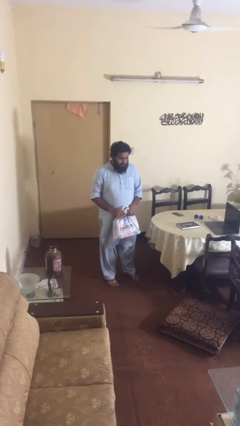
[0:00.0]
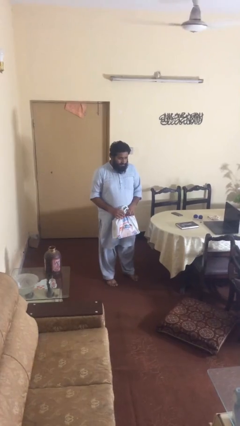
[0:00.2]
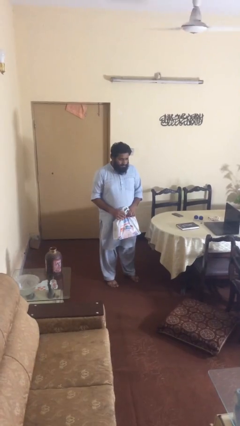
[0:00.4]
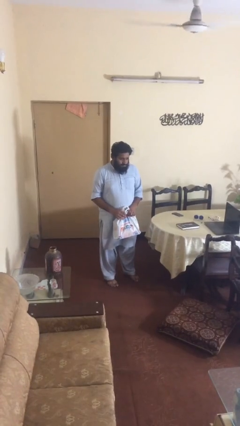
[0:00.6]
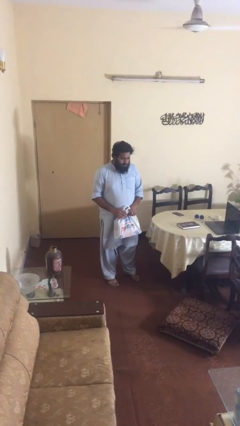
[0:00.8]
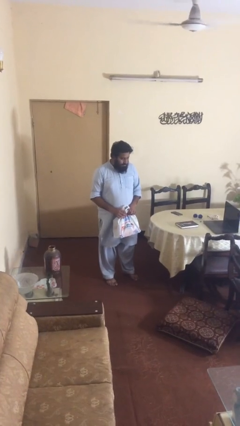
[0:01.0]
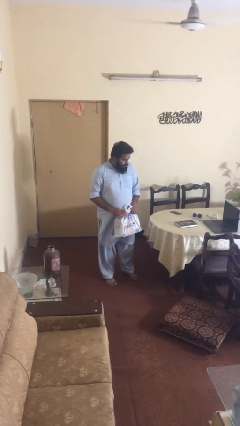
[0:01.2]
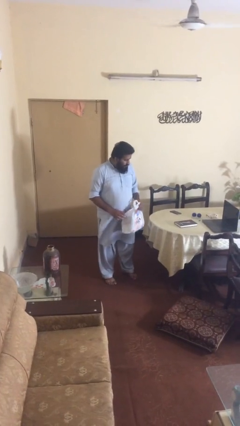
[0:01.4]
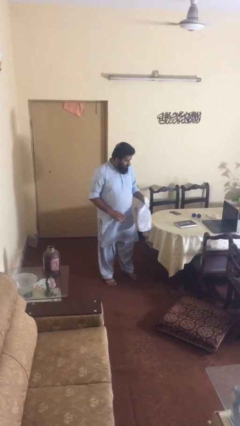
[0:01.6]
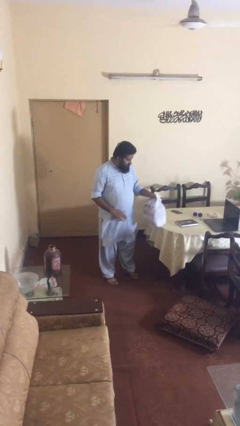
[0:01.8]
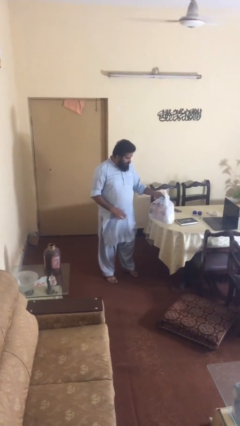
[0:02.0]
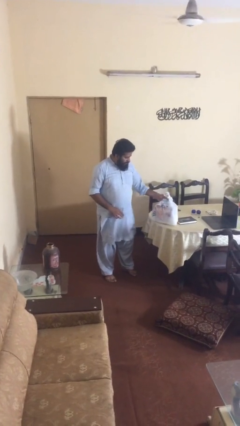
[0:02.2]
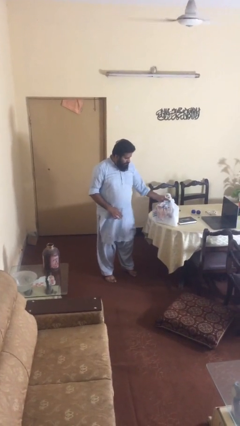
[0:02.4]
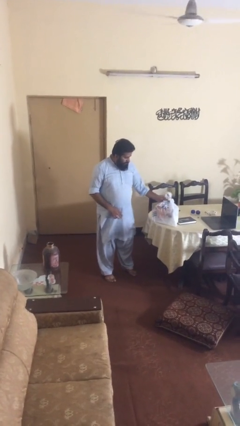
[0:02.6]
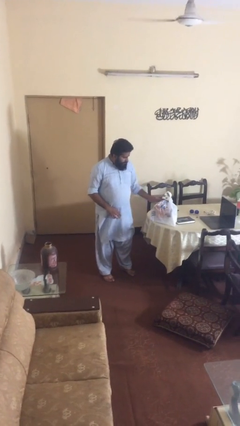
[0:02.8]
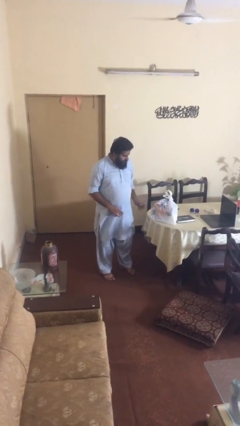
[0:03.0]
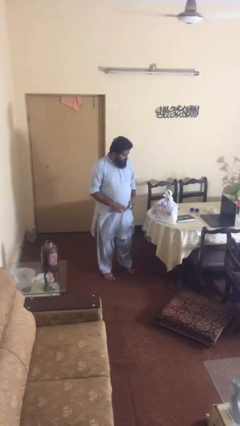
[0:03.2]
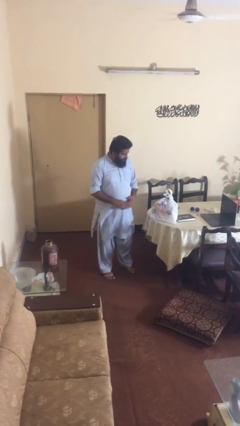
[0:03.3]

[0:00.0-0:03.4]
person puts down object on table

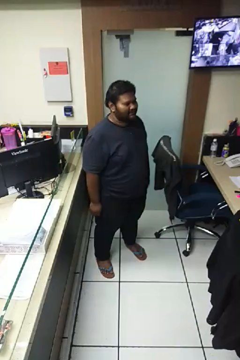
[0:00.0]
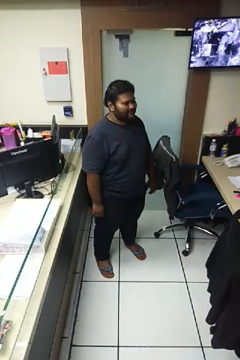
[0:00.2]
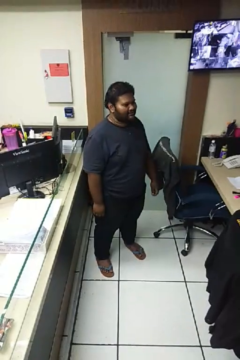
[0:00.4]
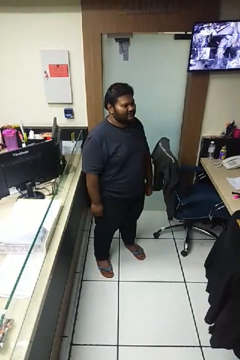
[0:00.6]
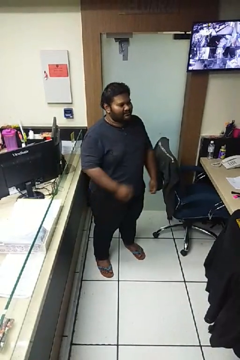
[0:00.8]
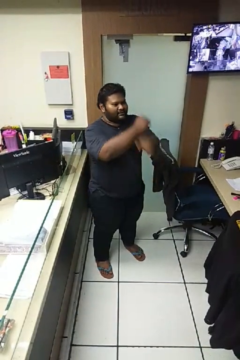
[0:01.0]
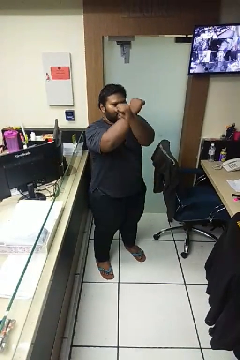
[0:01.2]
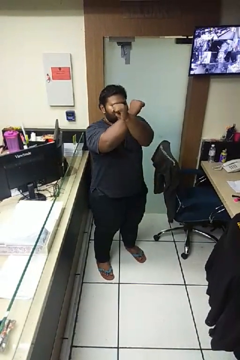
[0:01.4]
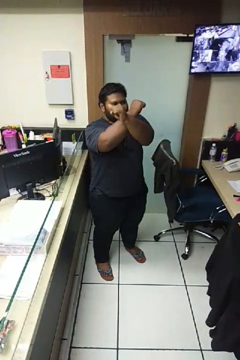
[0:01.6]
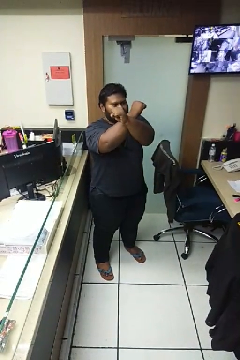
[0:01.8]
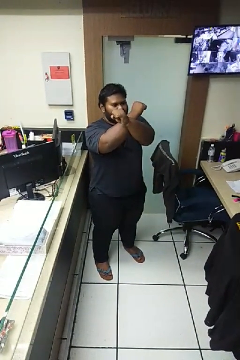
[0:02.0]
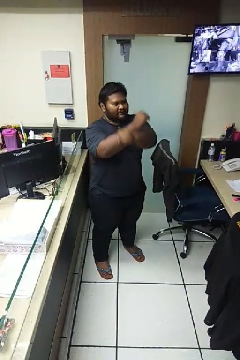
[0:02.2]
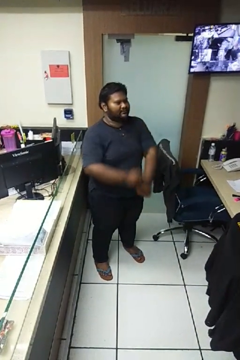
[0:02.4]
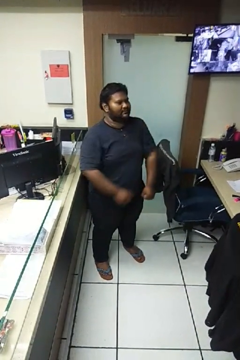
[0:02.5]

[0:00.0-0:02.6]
person gestures arms x

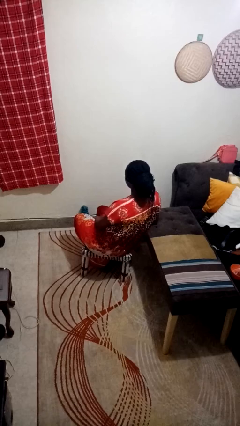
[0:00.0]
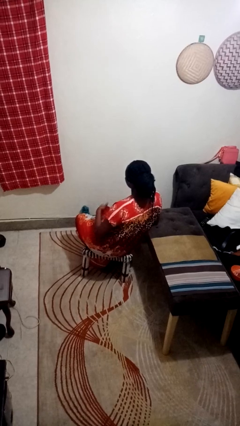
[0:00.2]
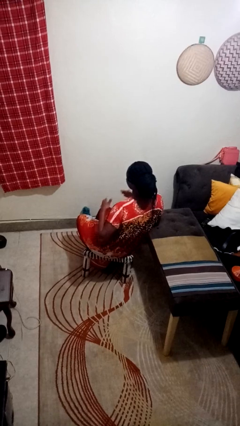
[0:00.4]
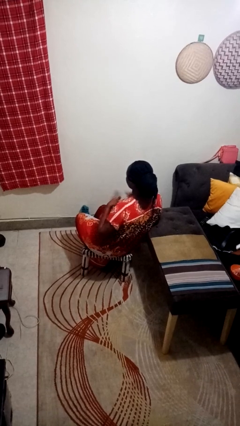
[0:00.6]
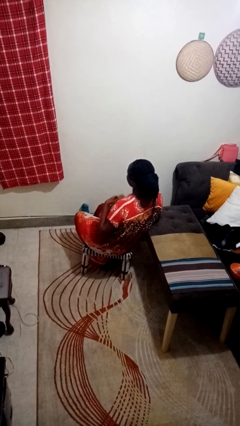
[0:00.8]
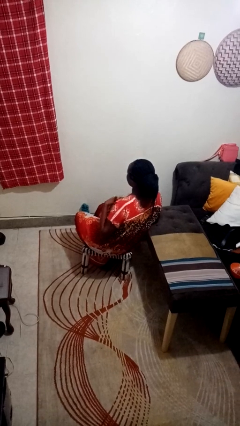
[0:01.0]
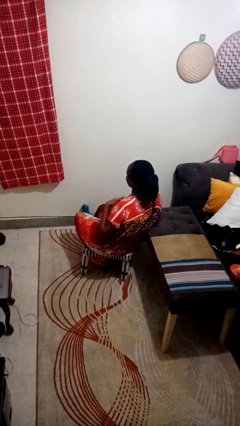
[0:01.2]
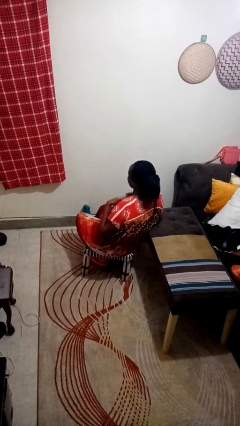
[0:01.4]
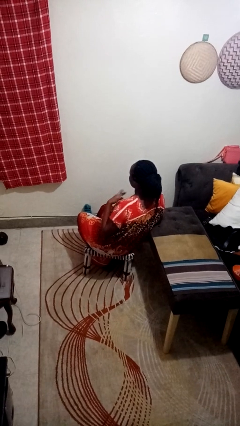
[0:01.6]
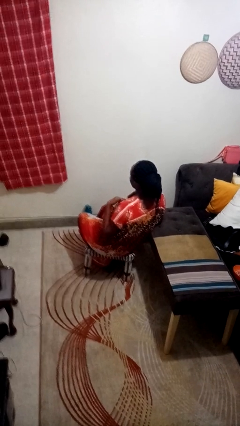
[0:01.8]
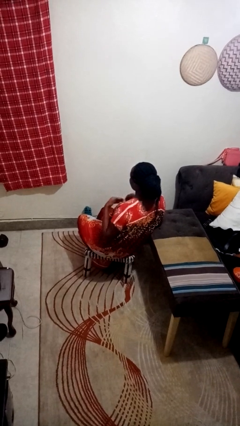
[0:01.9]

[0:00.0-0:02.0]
person drums on chest

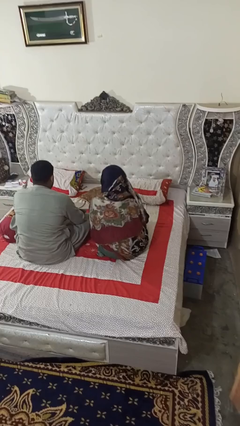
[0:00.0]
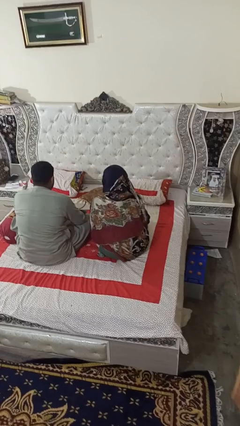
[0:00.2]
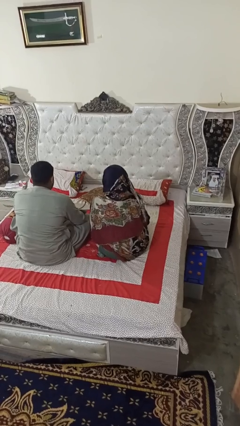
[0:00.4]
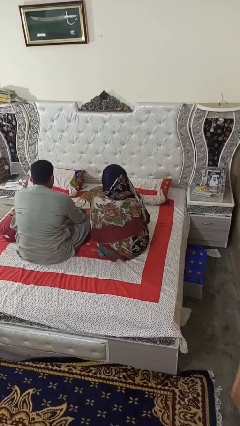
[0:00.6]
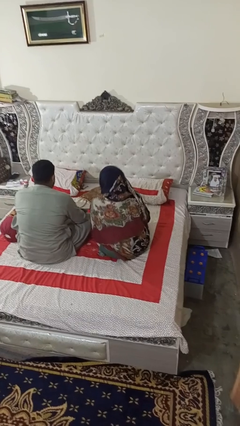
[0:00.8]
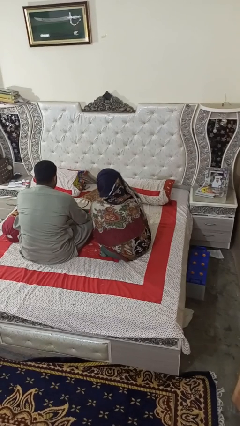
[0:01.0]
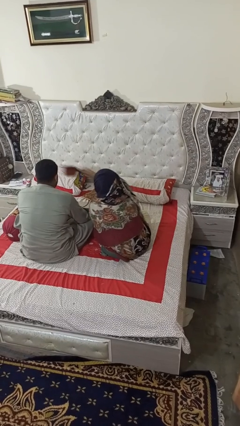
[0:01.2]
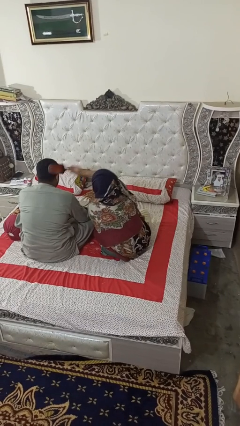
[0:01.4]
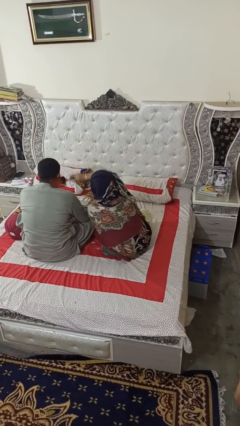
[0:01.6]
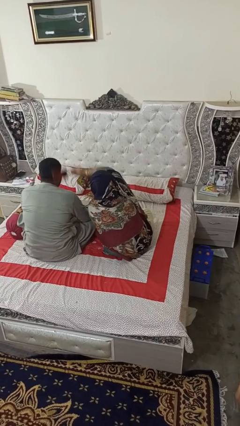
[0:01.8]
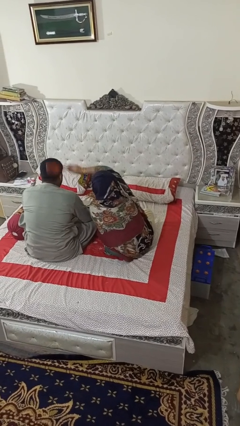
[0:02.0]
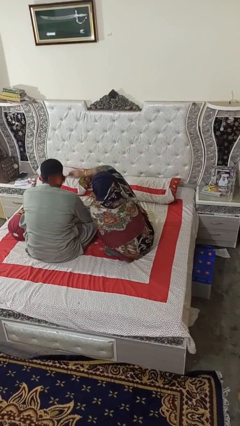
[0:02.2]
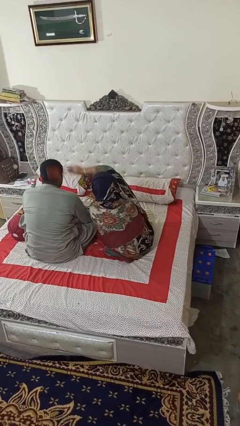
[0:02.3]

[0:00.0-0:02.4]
person brushes hair of person

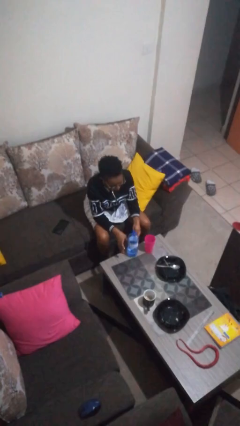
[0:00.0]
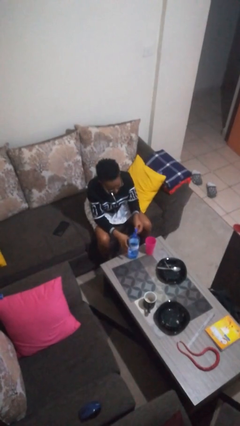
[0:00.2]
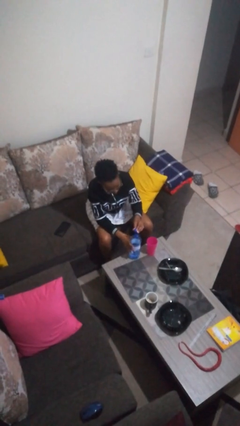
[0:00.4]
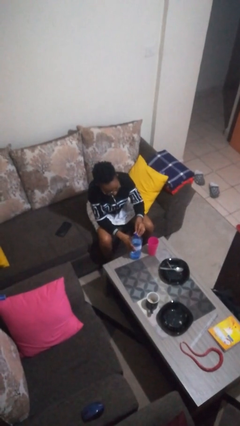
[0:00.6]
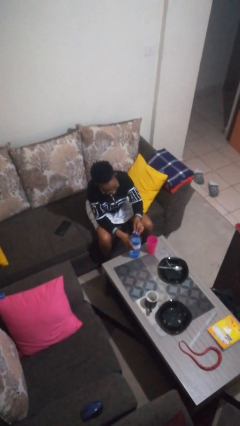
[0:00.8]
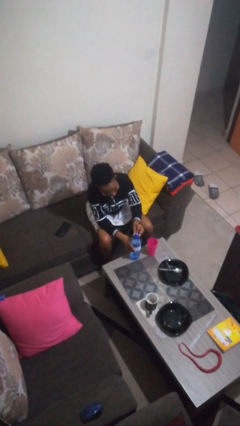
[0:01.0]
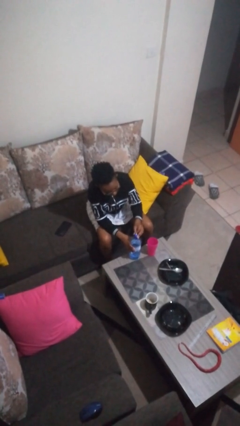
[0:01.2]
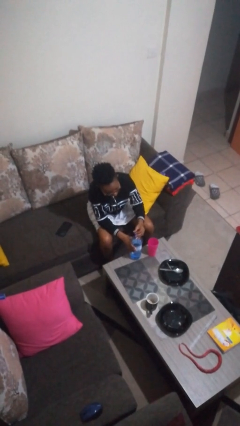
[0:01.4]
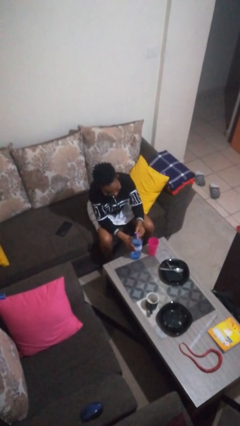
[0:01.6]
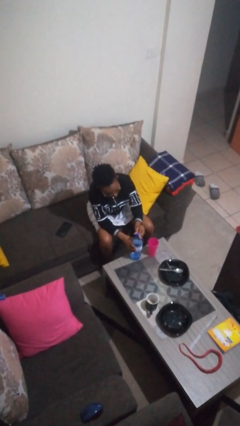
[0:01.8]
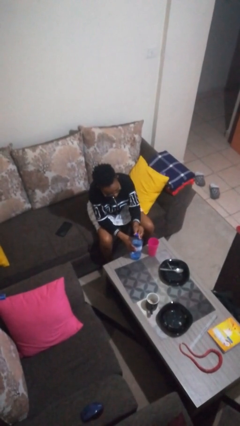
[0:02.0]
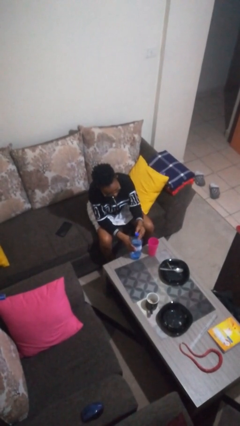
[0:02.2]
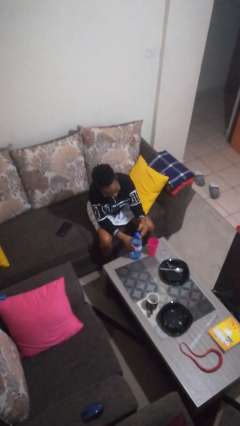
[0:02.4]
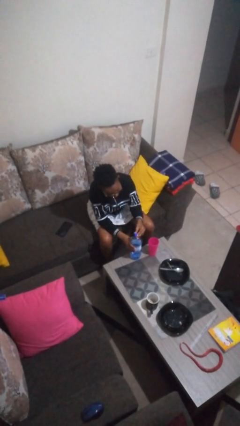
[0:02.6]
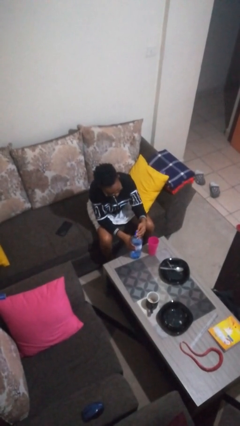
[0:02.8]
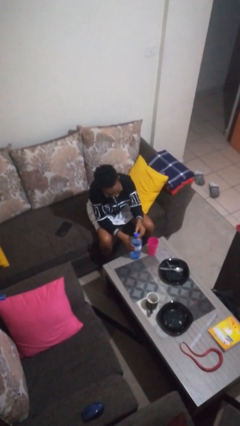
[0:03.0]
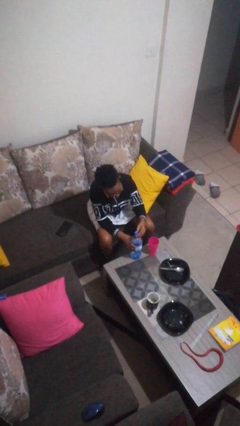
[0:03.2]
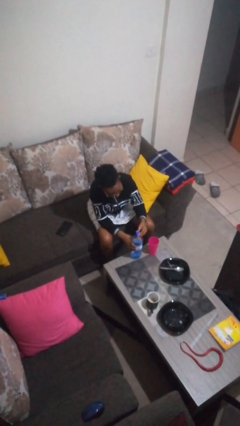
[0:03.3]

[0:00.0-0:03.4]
person screws lid to bottle

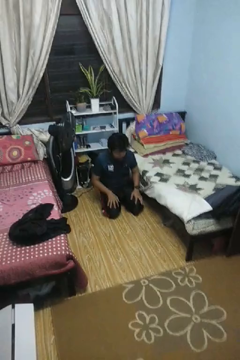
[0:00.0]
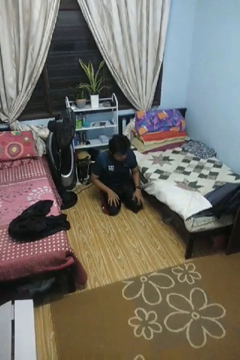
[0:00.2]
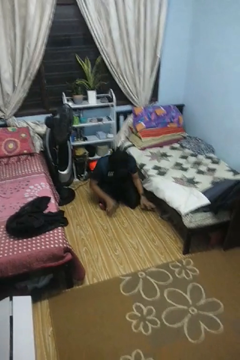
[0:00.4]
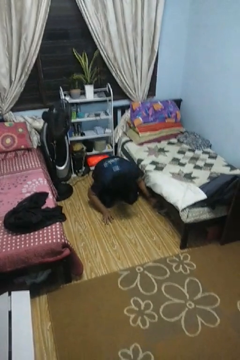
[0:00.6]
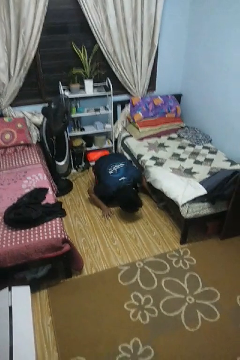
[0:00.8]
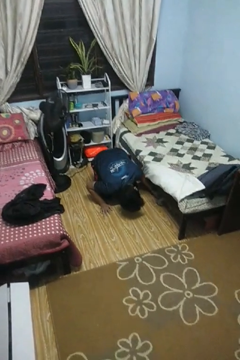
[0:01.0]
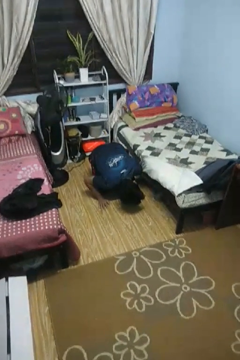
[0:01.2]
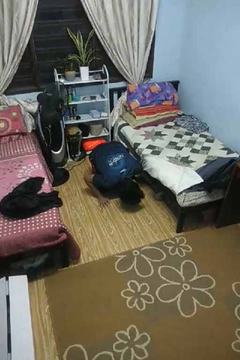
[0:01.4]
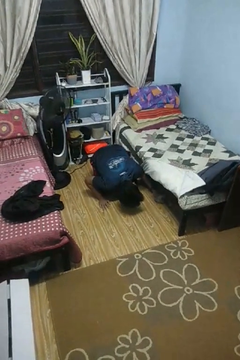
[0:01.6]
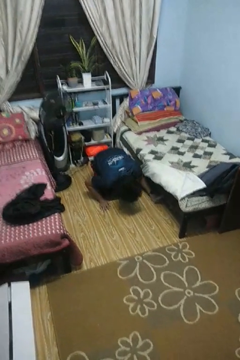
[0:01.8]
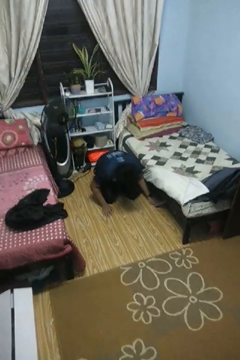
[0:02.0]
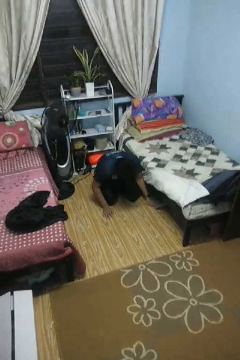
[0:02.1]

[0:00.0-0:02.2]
person searches under bed

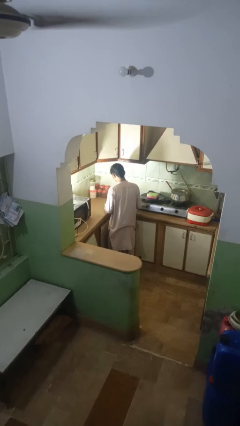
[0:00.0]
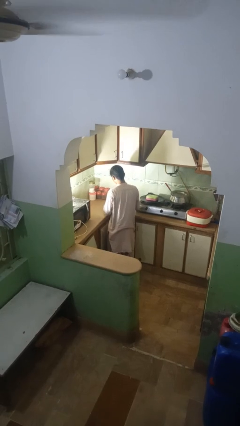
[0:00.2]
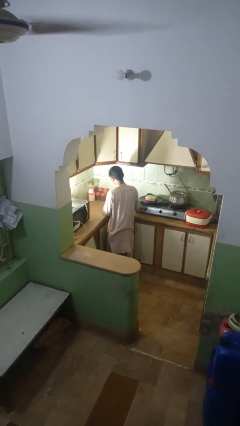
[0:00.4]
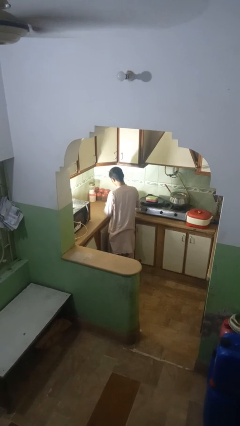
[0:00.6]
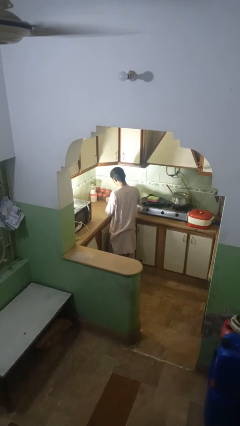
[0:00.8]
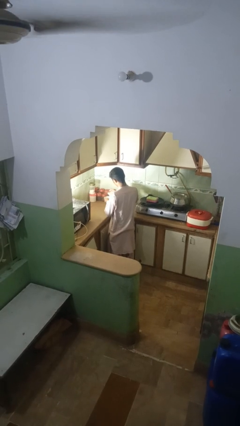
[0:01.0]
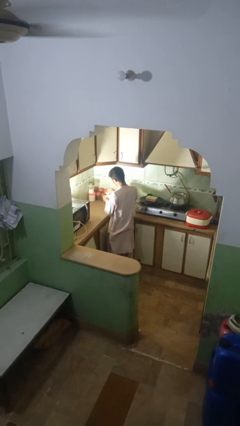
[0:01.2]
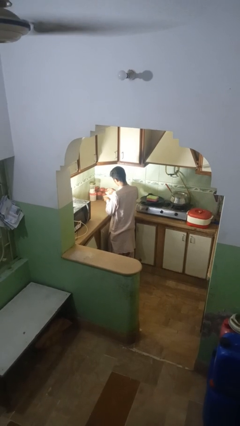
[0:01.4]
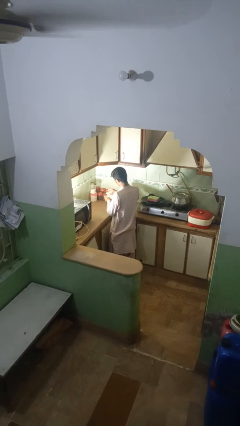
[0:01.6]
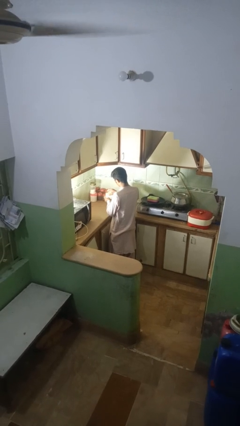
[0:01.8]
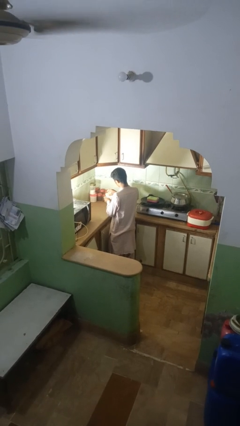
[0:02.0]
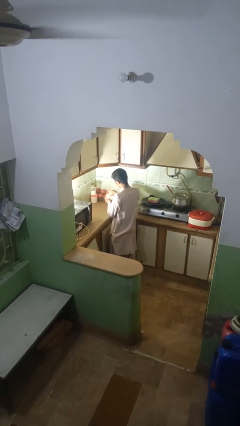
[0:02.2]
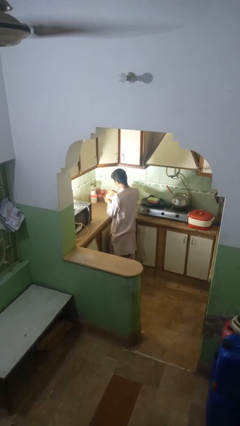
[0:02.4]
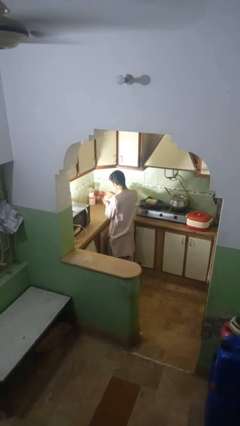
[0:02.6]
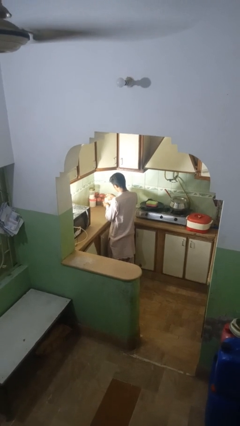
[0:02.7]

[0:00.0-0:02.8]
person pours into bowl
